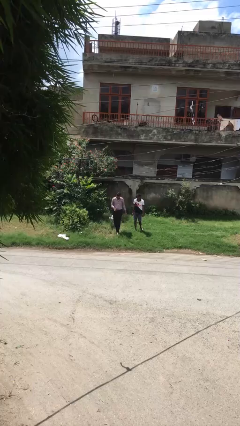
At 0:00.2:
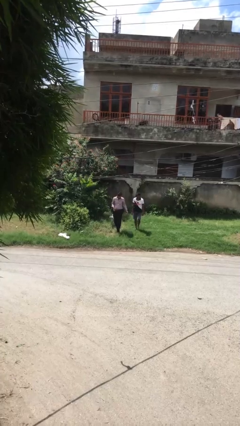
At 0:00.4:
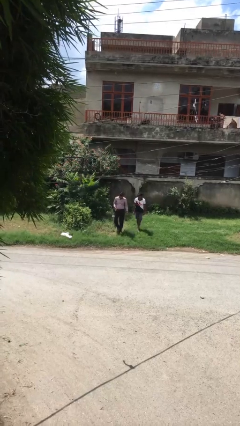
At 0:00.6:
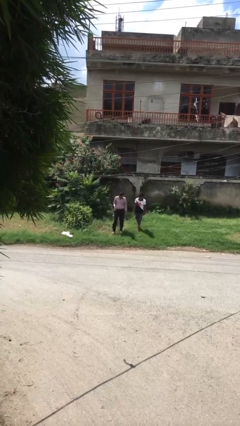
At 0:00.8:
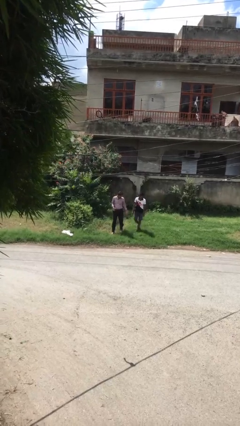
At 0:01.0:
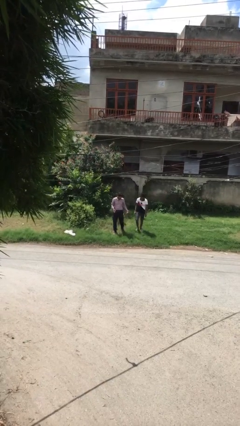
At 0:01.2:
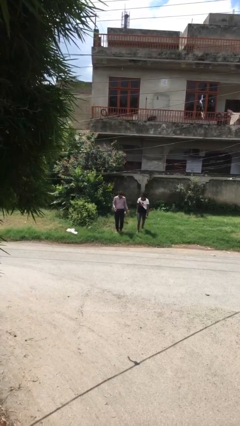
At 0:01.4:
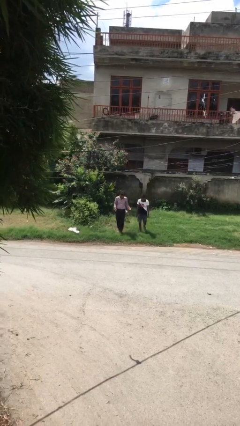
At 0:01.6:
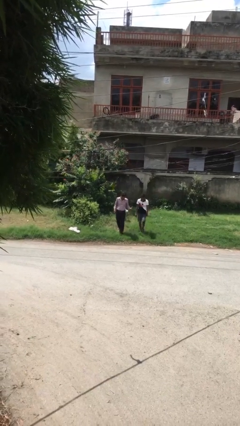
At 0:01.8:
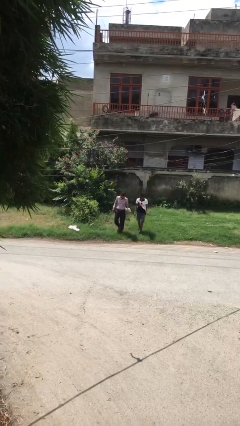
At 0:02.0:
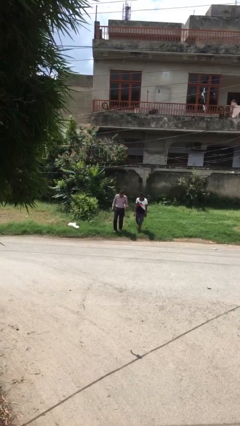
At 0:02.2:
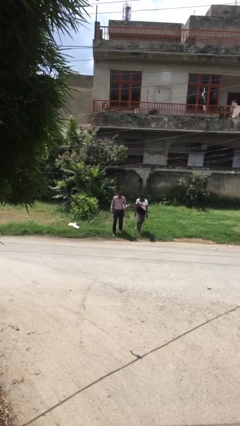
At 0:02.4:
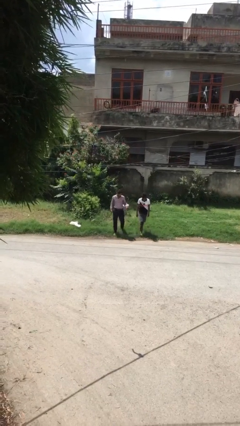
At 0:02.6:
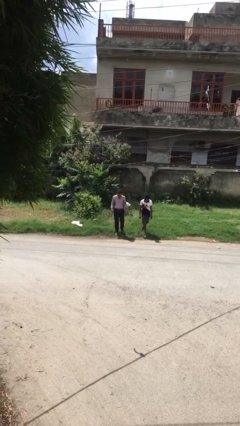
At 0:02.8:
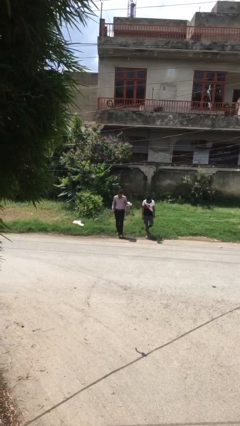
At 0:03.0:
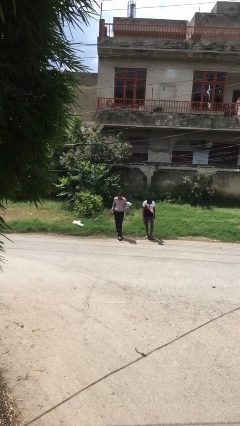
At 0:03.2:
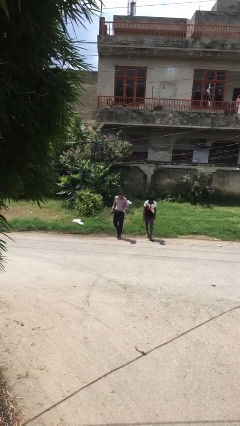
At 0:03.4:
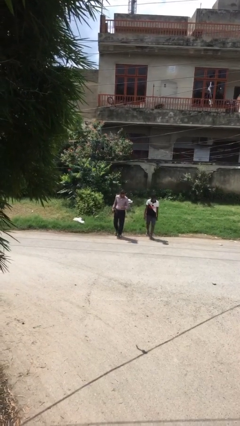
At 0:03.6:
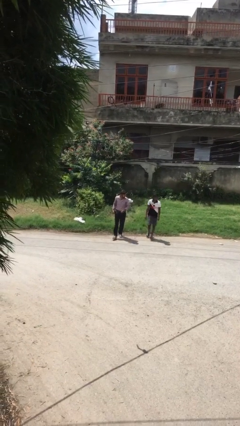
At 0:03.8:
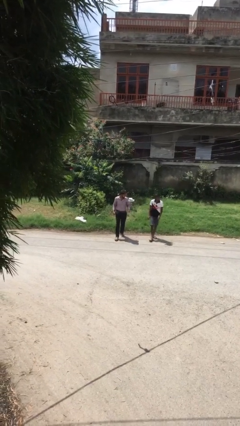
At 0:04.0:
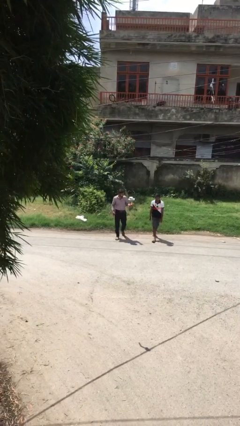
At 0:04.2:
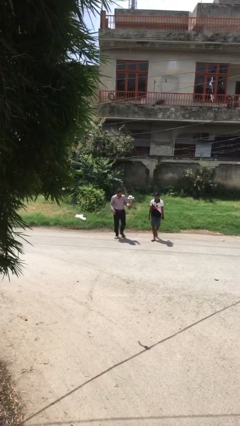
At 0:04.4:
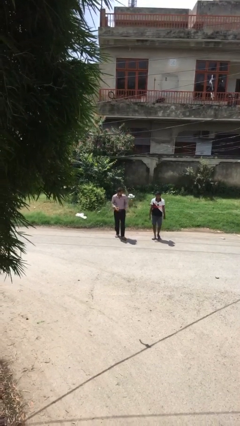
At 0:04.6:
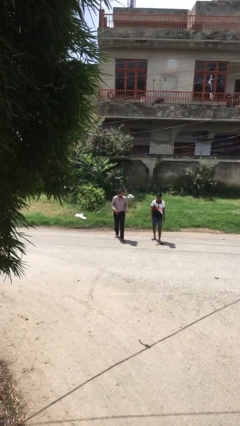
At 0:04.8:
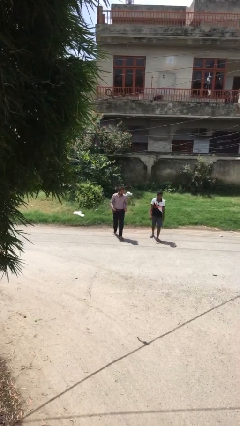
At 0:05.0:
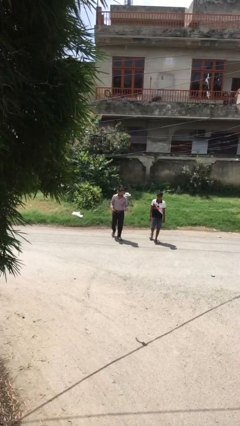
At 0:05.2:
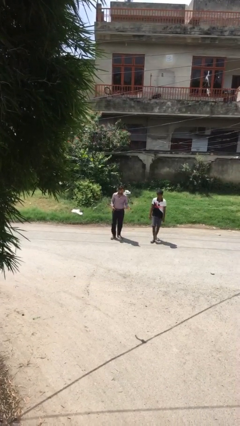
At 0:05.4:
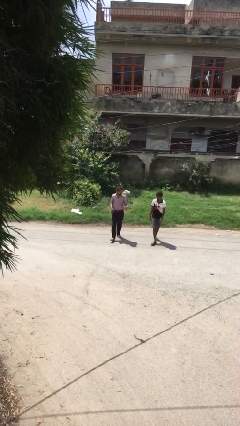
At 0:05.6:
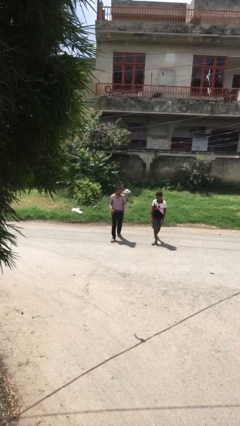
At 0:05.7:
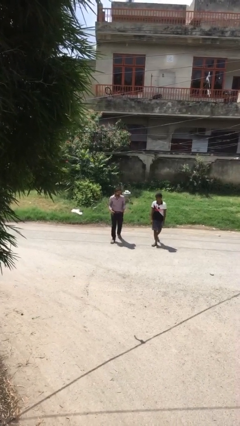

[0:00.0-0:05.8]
person talks to person

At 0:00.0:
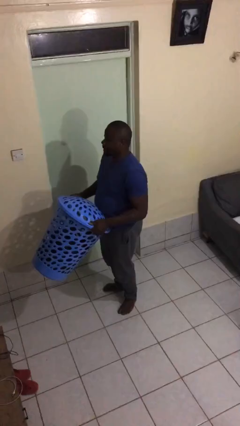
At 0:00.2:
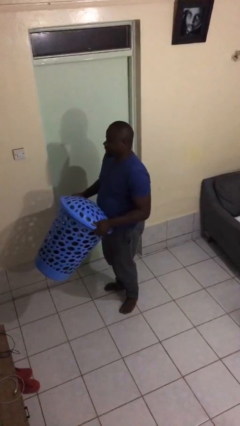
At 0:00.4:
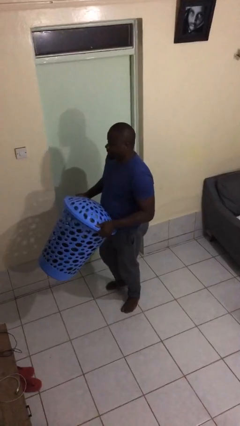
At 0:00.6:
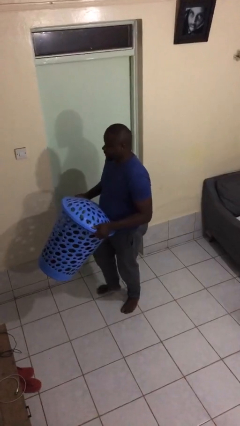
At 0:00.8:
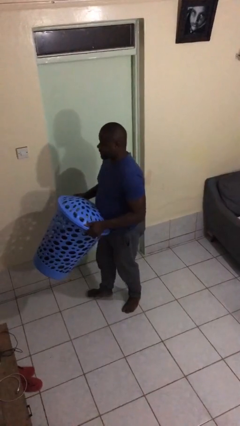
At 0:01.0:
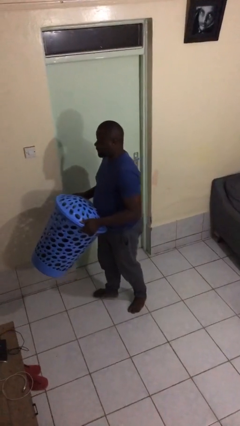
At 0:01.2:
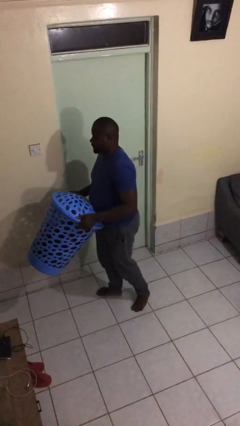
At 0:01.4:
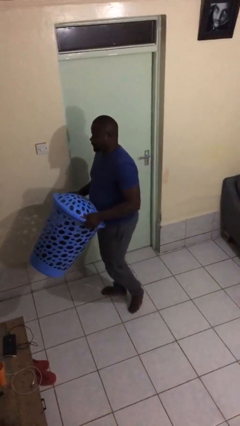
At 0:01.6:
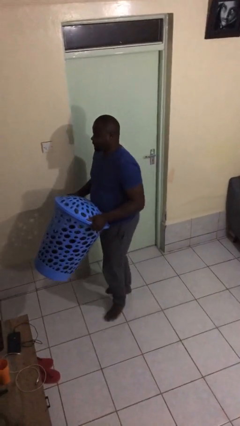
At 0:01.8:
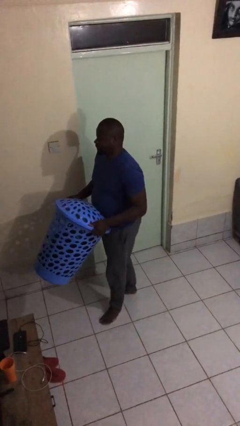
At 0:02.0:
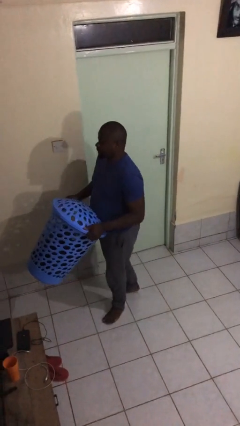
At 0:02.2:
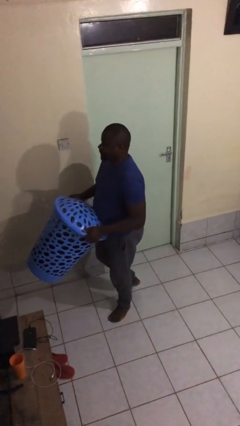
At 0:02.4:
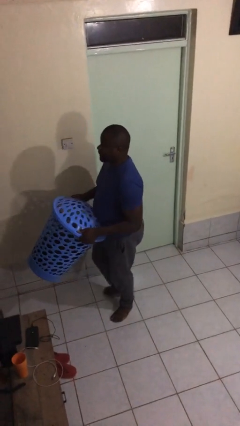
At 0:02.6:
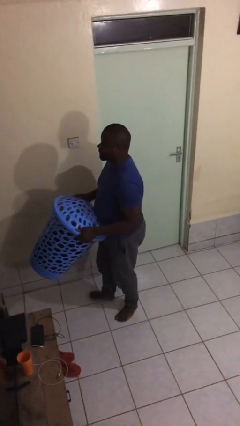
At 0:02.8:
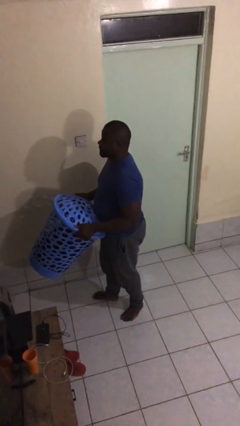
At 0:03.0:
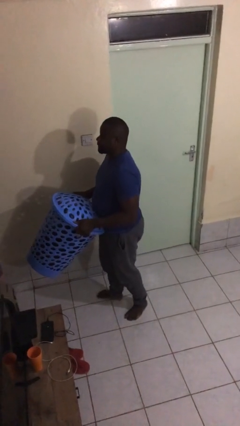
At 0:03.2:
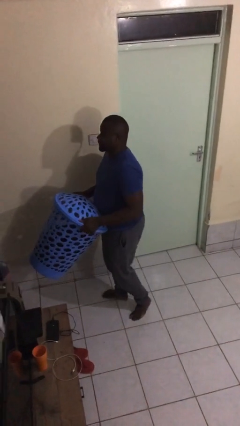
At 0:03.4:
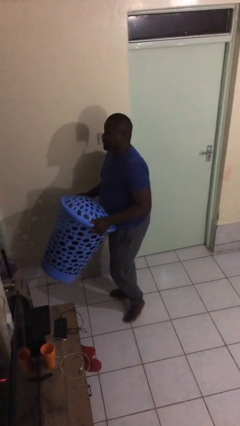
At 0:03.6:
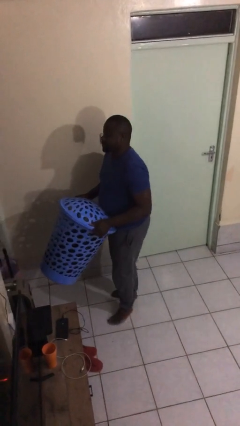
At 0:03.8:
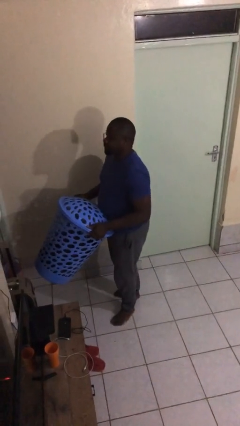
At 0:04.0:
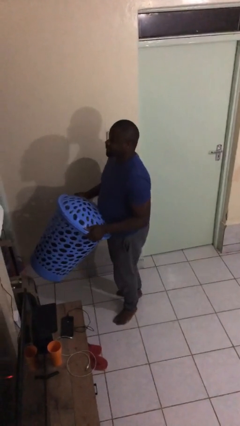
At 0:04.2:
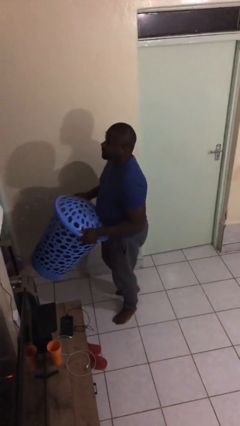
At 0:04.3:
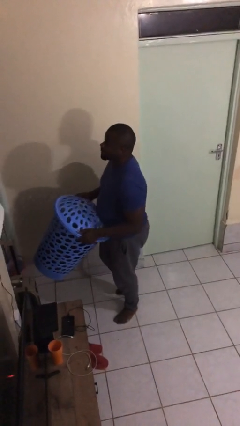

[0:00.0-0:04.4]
person carries laundry basket

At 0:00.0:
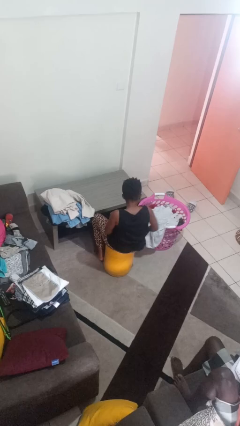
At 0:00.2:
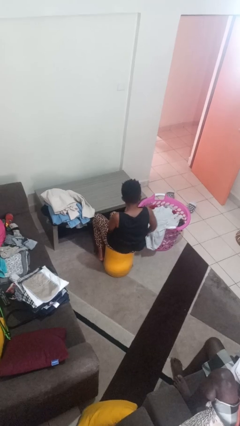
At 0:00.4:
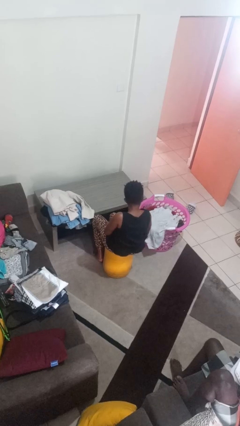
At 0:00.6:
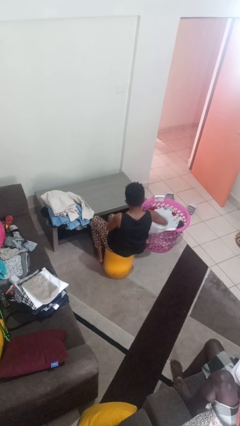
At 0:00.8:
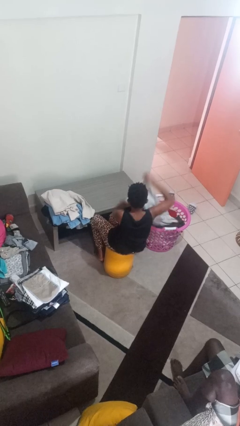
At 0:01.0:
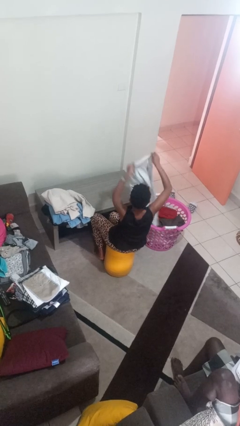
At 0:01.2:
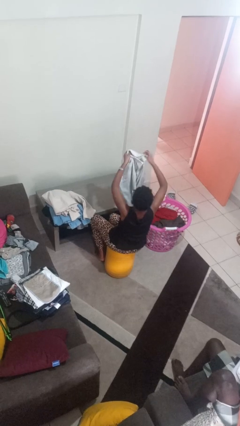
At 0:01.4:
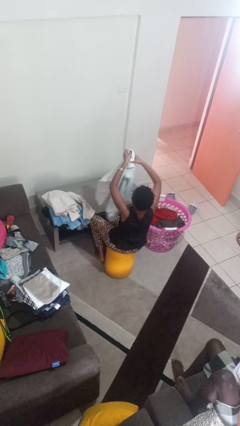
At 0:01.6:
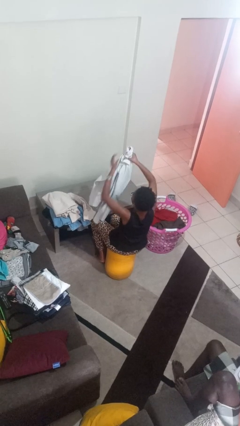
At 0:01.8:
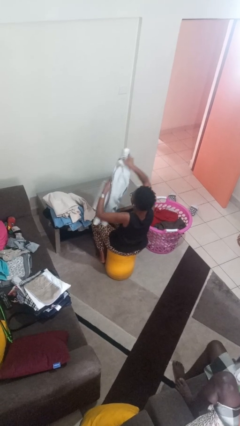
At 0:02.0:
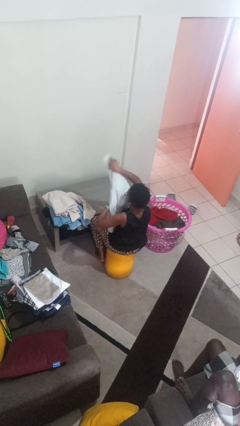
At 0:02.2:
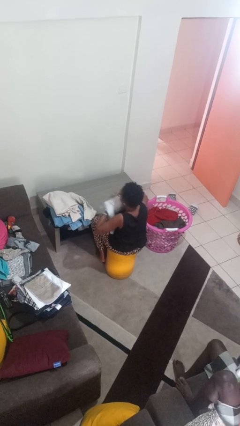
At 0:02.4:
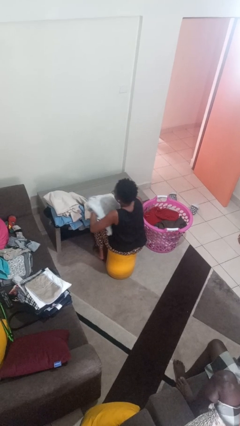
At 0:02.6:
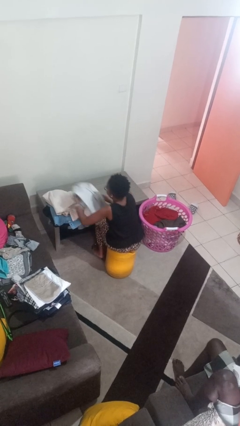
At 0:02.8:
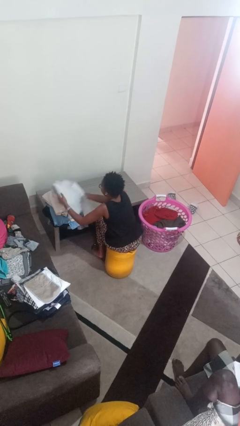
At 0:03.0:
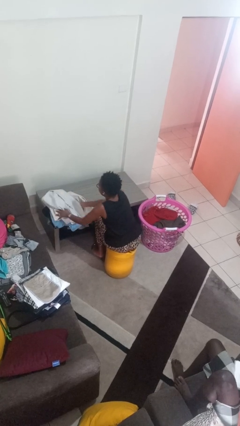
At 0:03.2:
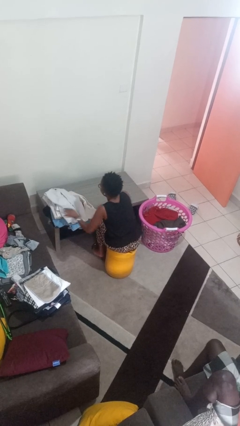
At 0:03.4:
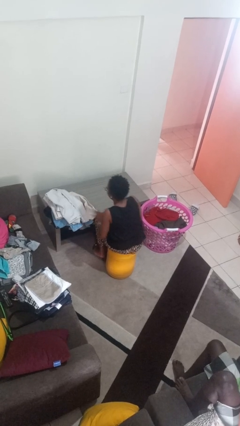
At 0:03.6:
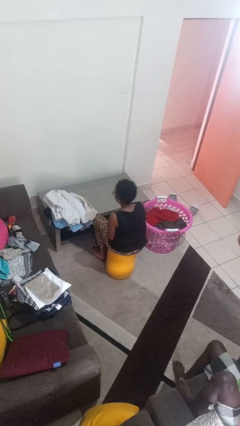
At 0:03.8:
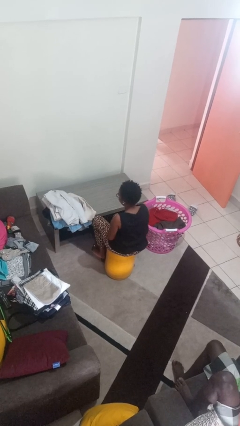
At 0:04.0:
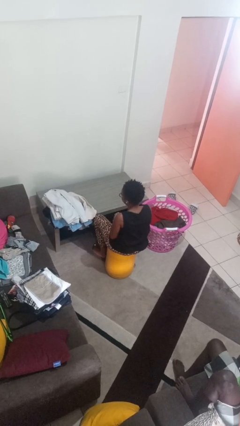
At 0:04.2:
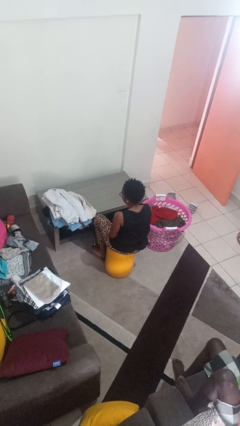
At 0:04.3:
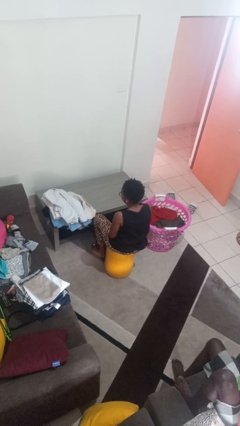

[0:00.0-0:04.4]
person folds shirt

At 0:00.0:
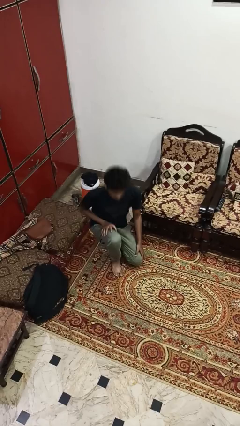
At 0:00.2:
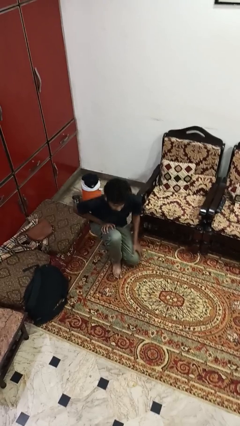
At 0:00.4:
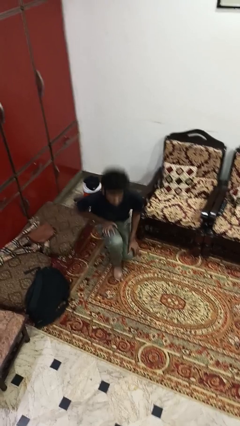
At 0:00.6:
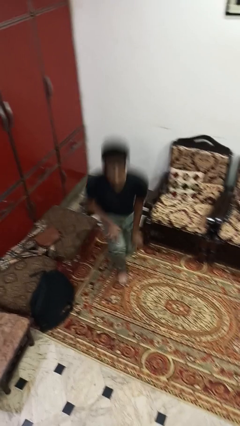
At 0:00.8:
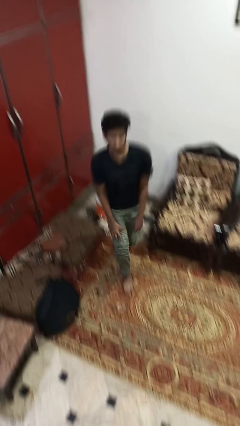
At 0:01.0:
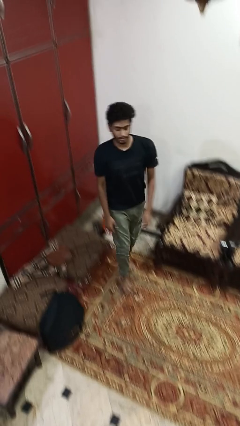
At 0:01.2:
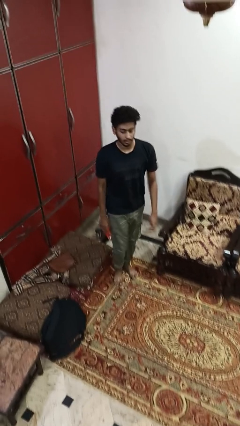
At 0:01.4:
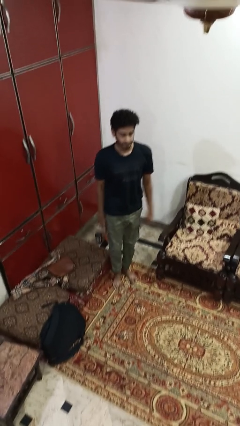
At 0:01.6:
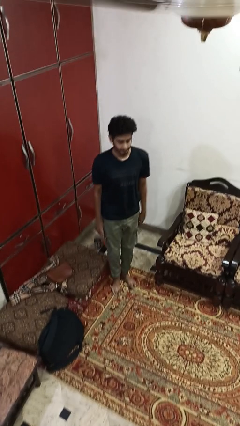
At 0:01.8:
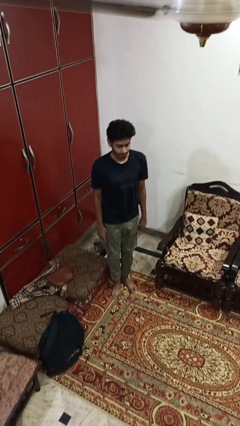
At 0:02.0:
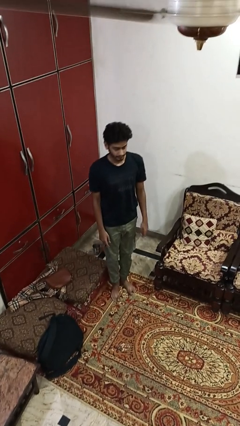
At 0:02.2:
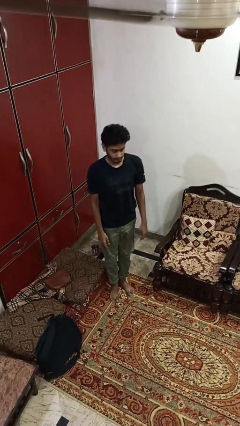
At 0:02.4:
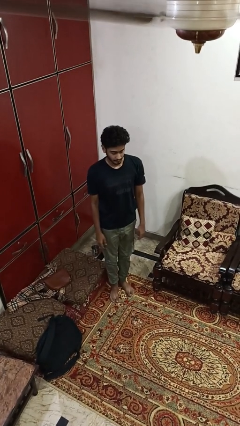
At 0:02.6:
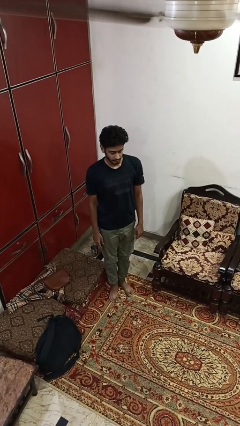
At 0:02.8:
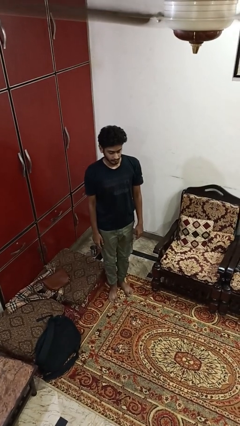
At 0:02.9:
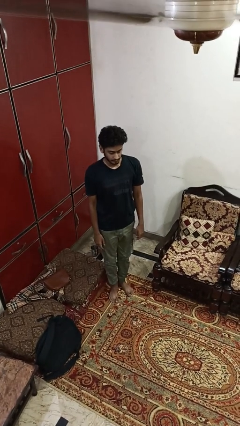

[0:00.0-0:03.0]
person stands up from floor
